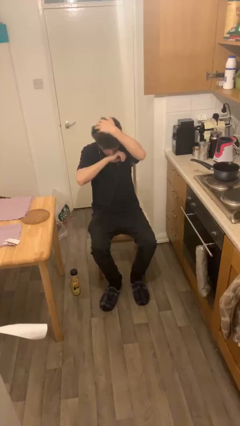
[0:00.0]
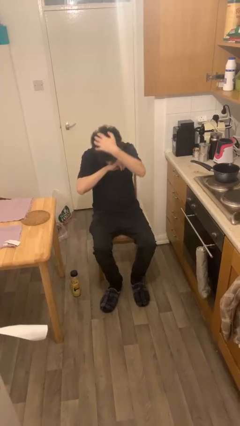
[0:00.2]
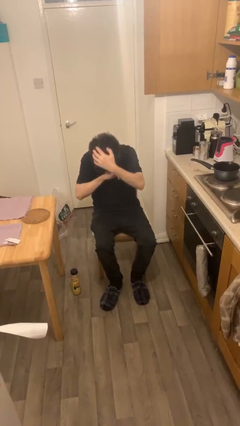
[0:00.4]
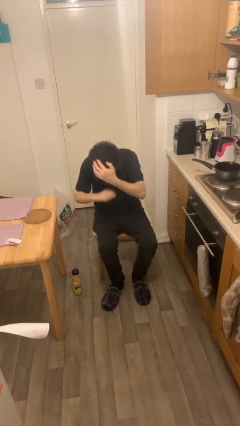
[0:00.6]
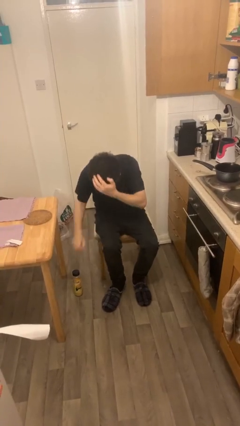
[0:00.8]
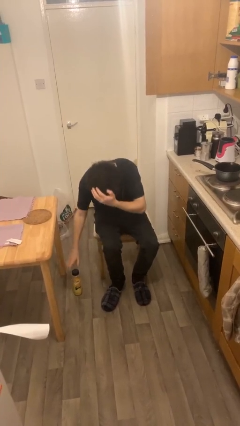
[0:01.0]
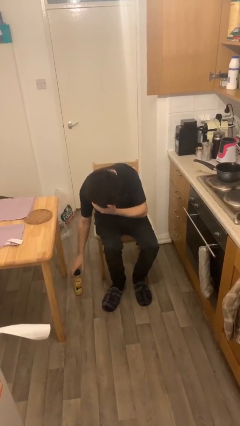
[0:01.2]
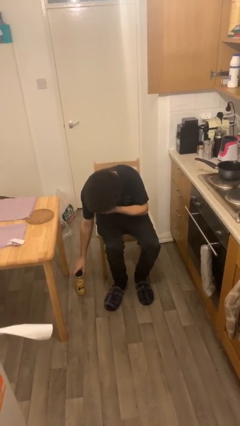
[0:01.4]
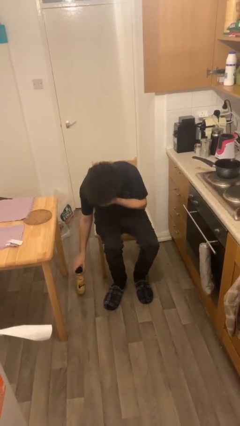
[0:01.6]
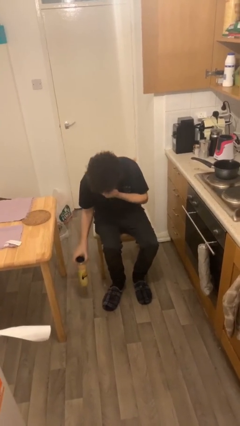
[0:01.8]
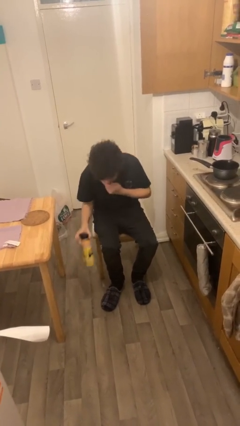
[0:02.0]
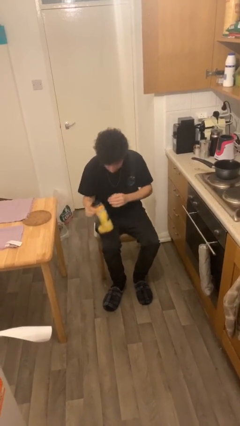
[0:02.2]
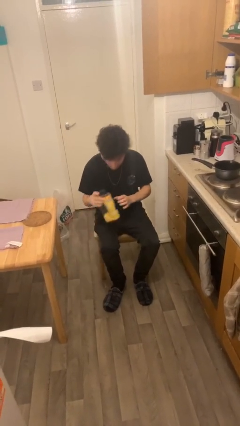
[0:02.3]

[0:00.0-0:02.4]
person picks up object from floor

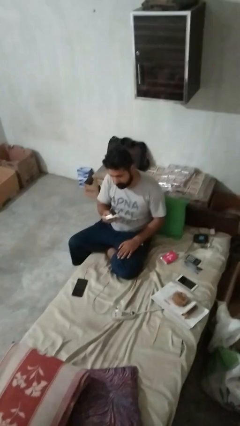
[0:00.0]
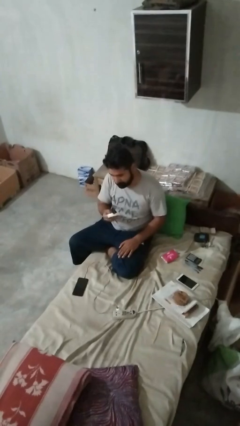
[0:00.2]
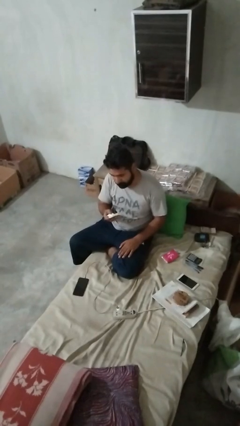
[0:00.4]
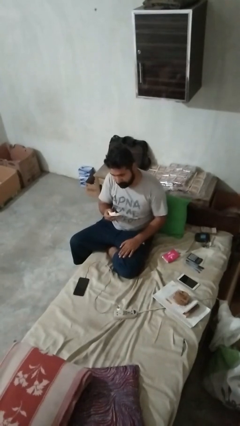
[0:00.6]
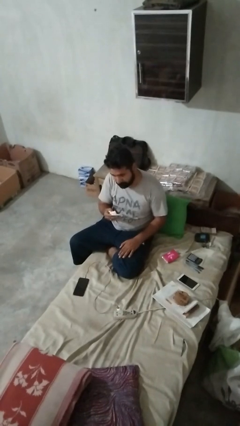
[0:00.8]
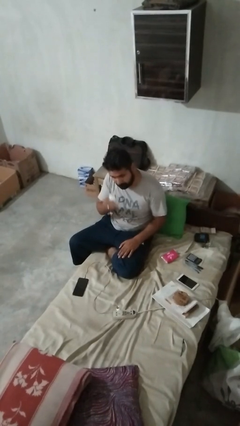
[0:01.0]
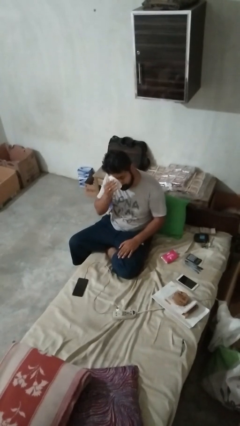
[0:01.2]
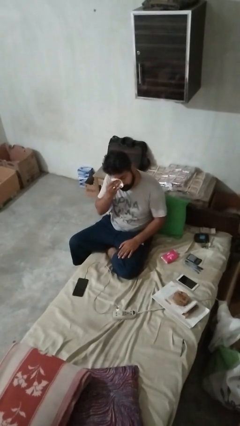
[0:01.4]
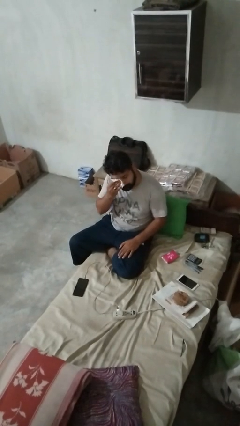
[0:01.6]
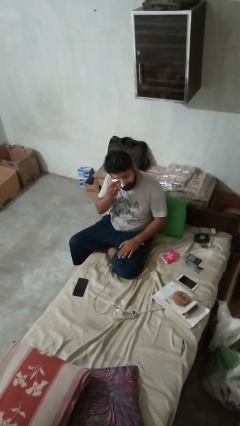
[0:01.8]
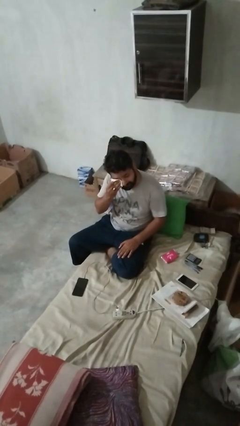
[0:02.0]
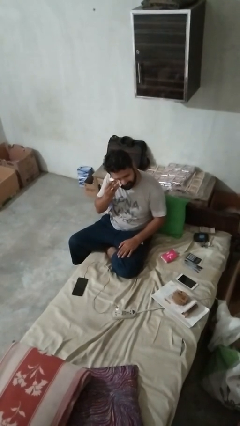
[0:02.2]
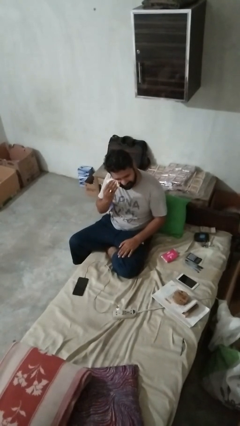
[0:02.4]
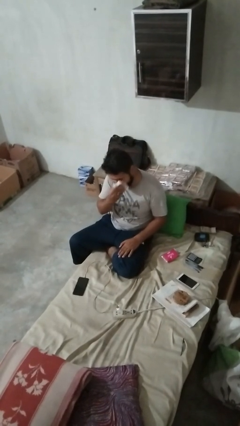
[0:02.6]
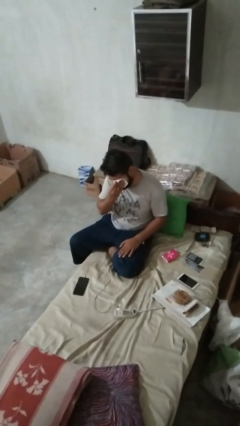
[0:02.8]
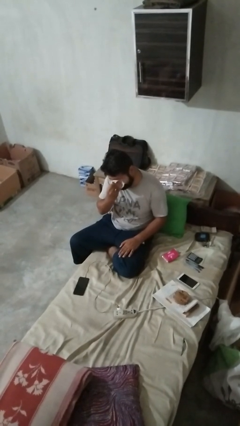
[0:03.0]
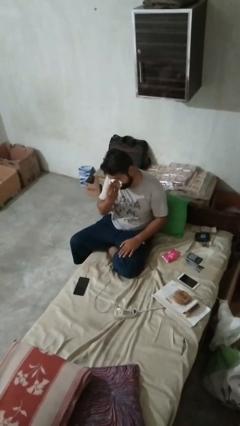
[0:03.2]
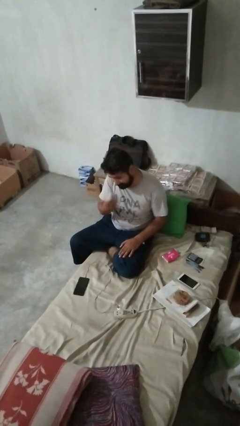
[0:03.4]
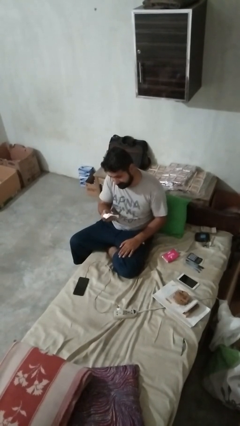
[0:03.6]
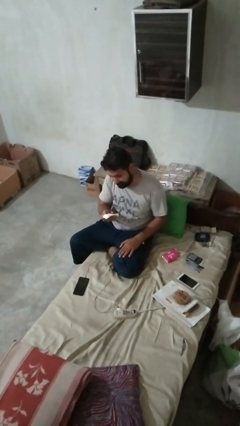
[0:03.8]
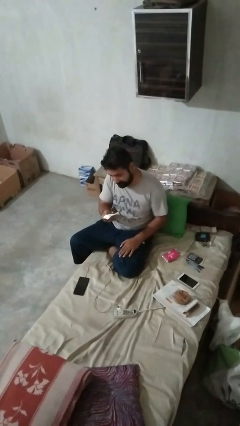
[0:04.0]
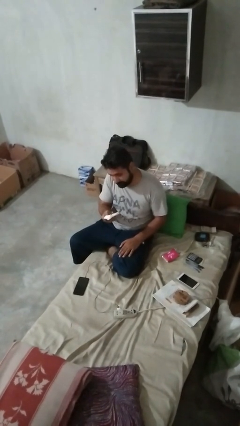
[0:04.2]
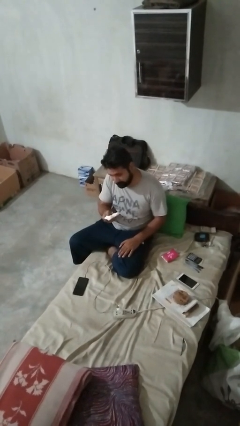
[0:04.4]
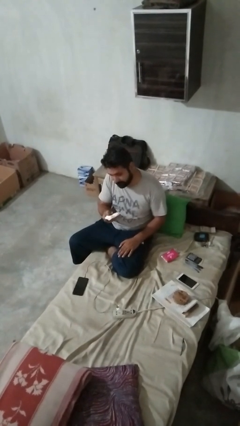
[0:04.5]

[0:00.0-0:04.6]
person wipes mouth with napkin

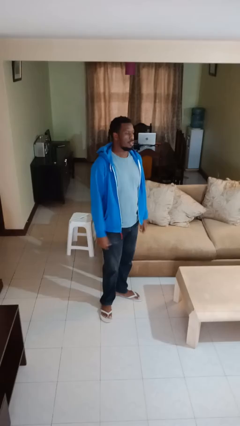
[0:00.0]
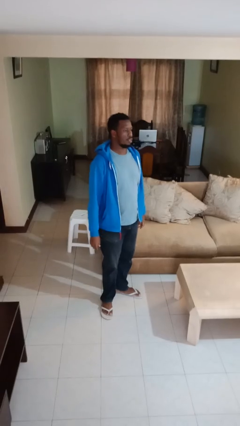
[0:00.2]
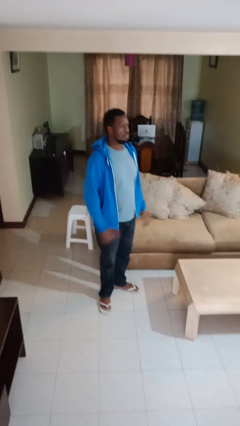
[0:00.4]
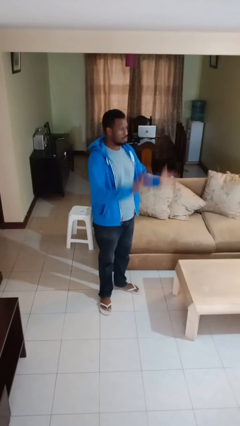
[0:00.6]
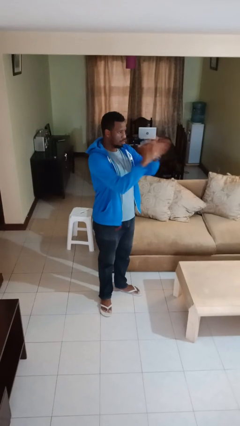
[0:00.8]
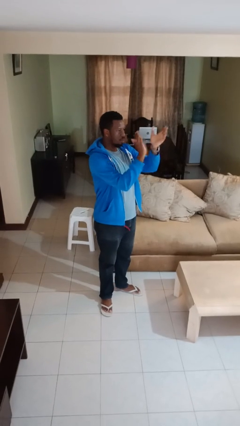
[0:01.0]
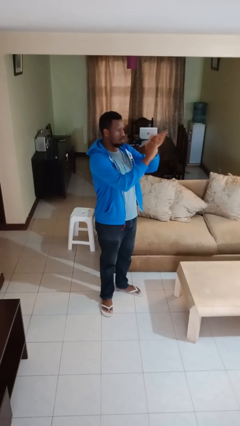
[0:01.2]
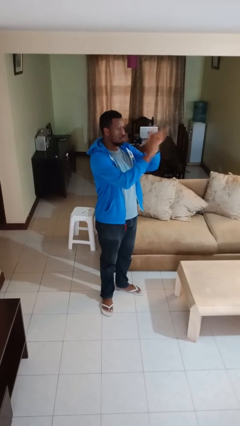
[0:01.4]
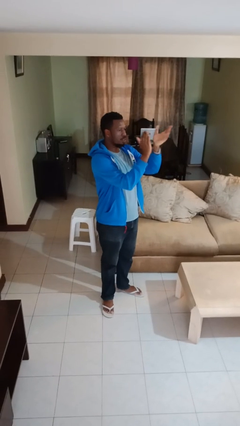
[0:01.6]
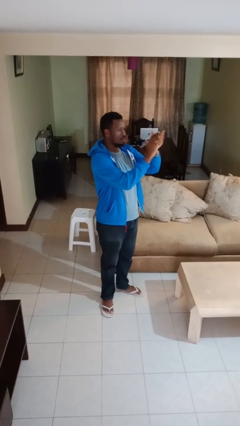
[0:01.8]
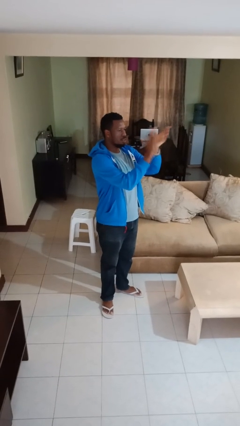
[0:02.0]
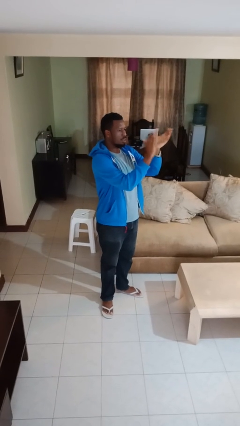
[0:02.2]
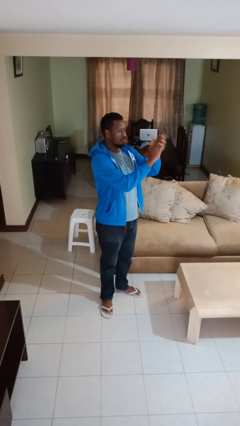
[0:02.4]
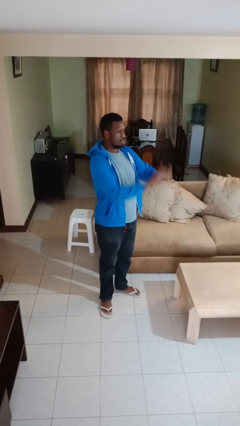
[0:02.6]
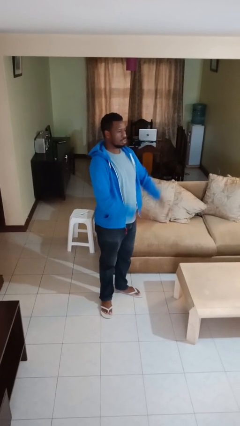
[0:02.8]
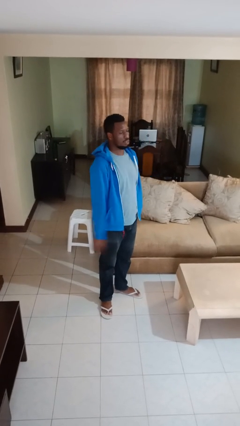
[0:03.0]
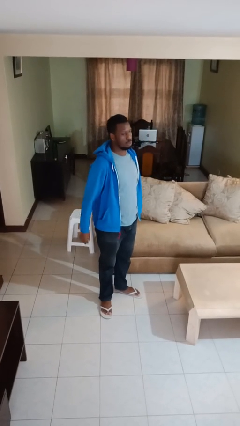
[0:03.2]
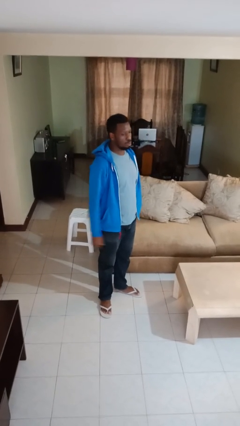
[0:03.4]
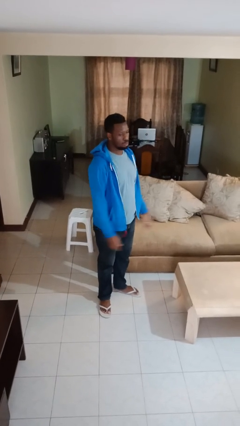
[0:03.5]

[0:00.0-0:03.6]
person claps hands

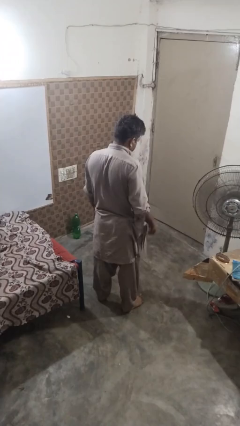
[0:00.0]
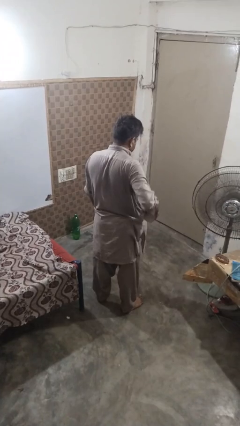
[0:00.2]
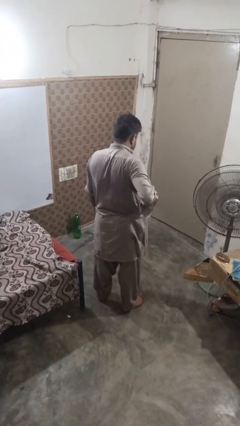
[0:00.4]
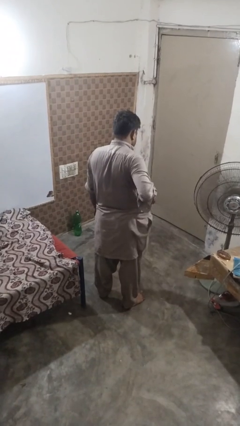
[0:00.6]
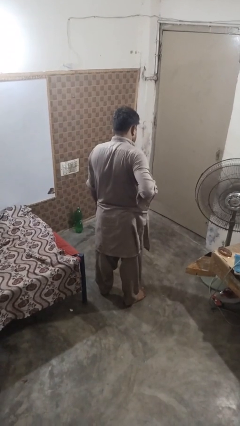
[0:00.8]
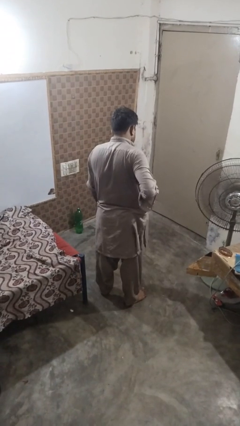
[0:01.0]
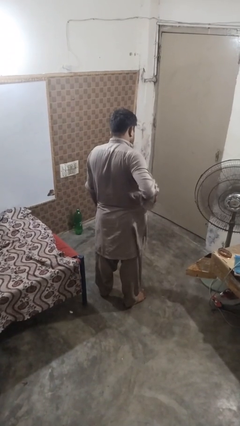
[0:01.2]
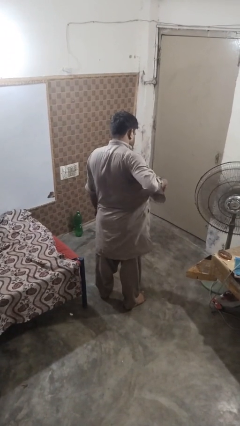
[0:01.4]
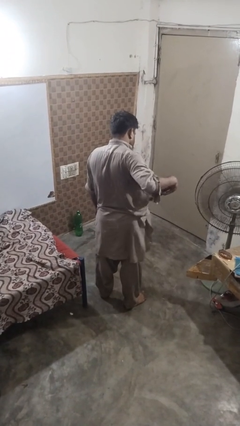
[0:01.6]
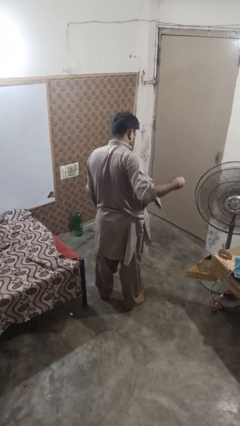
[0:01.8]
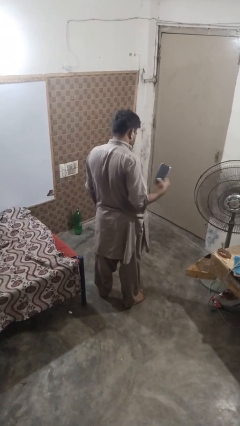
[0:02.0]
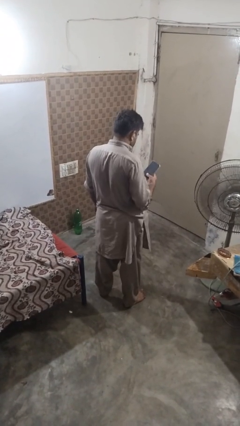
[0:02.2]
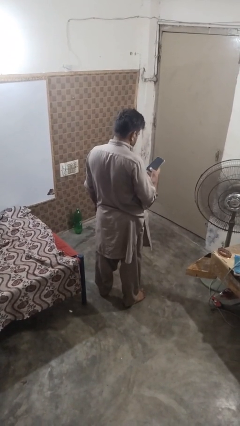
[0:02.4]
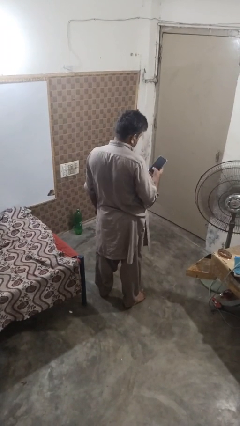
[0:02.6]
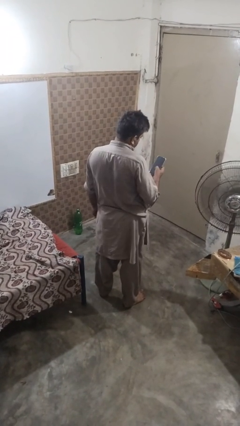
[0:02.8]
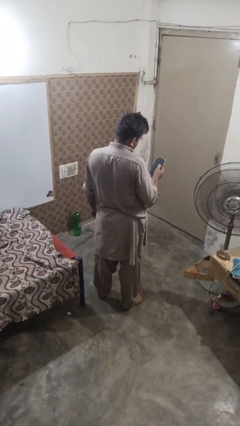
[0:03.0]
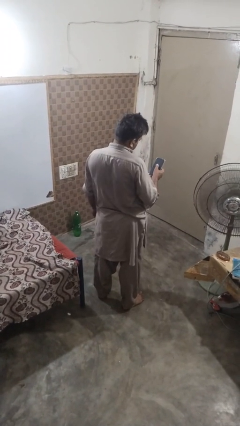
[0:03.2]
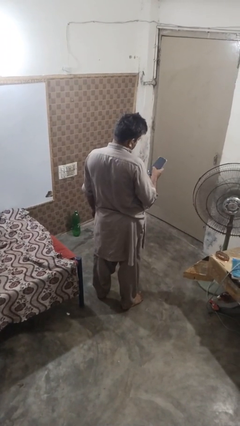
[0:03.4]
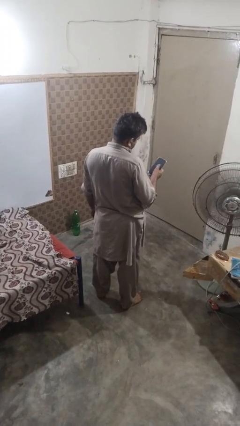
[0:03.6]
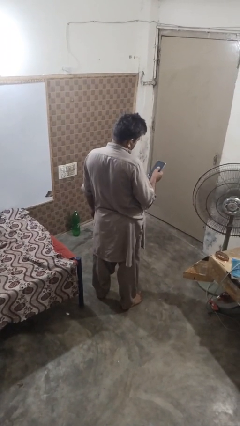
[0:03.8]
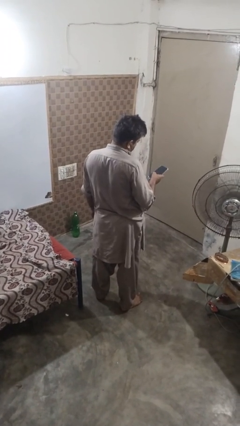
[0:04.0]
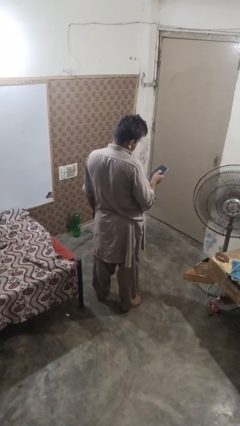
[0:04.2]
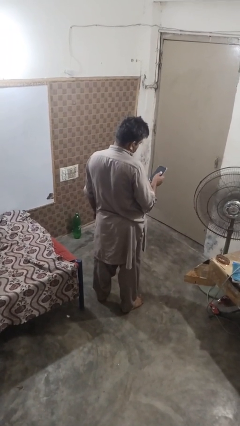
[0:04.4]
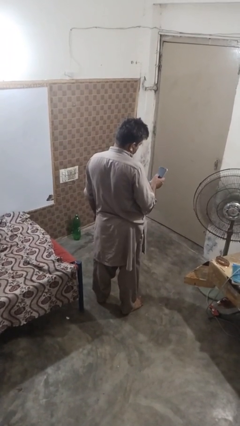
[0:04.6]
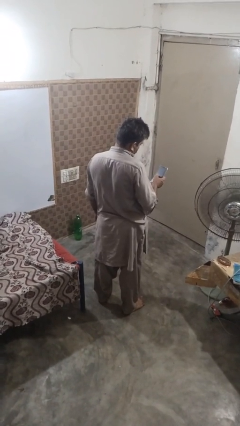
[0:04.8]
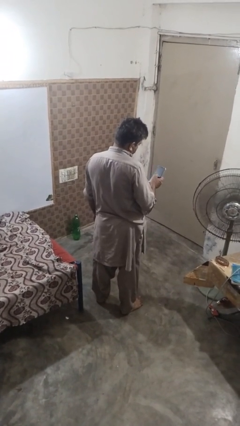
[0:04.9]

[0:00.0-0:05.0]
person takes phone from pocket

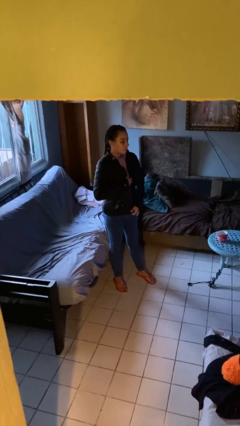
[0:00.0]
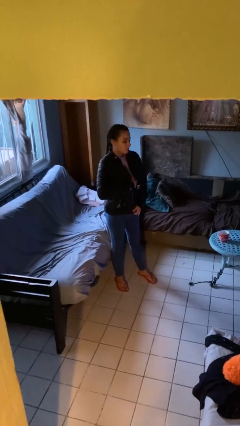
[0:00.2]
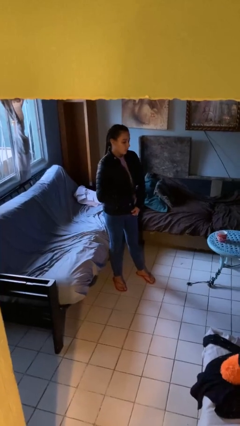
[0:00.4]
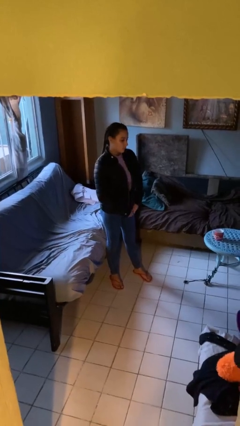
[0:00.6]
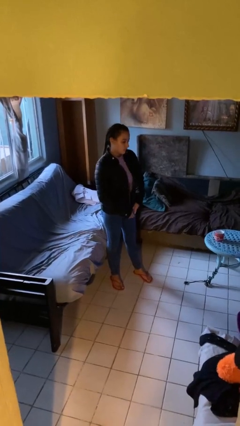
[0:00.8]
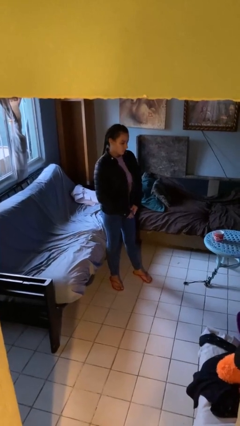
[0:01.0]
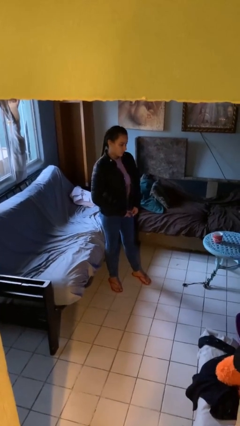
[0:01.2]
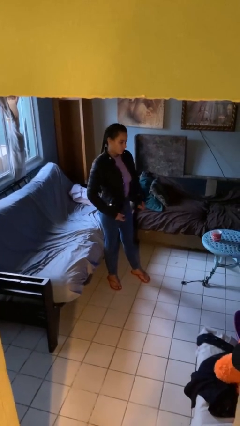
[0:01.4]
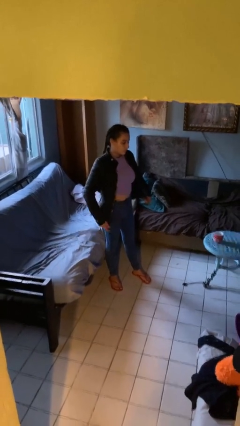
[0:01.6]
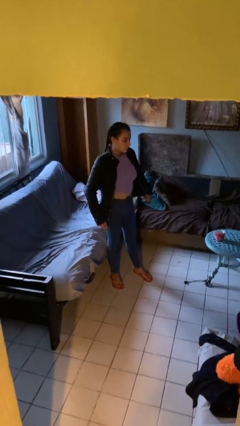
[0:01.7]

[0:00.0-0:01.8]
person unzips jacket

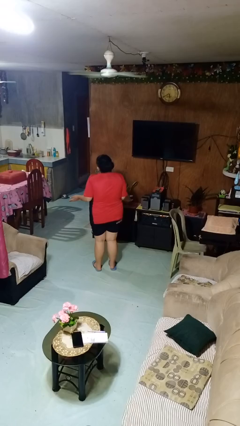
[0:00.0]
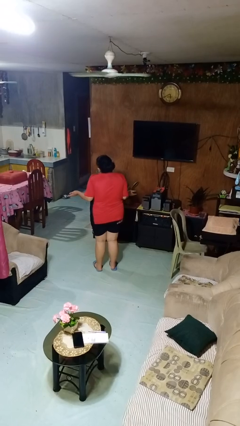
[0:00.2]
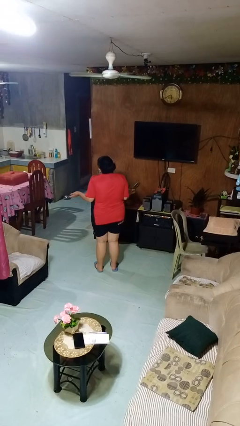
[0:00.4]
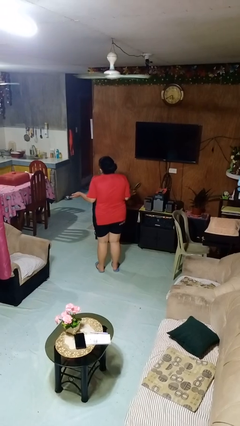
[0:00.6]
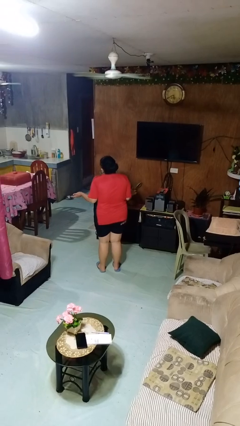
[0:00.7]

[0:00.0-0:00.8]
person shrugs
